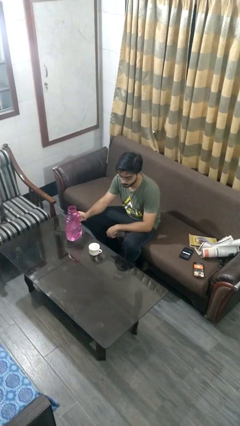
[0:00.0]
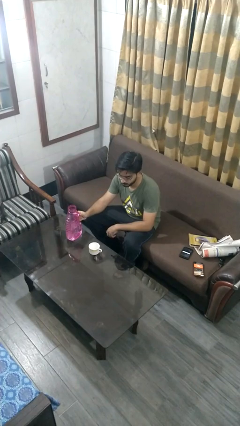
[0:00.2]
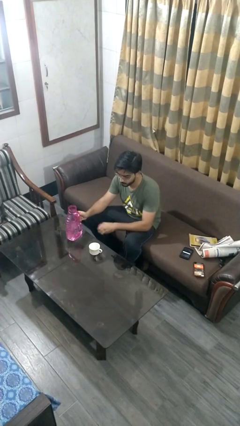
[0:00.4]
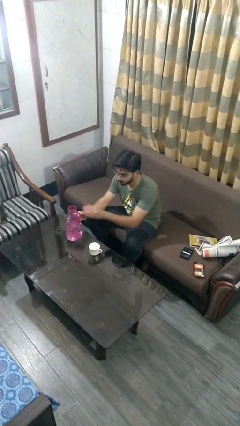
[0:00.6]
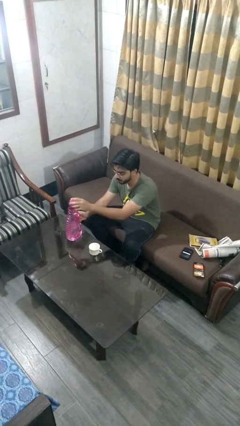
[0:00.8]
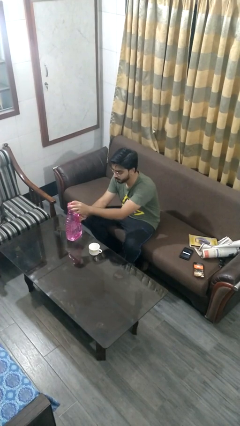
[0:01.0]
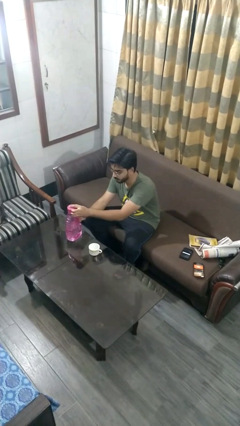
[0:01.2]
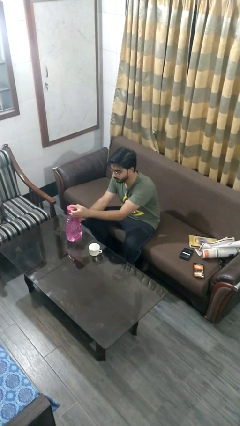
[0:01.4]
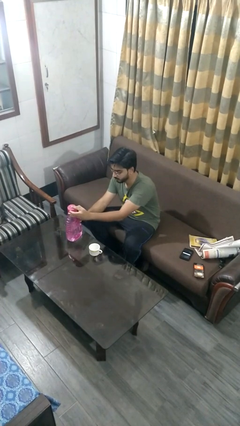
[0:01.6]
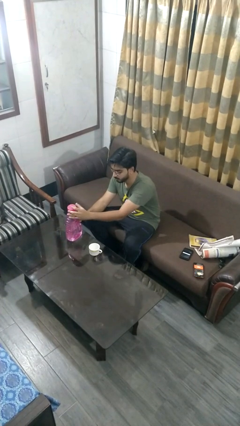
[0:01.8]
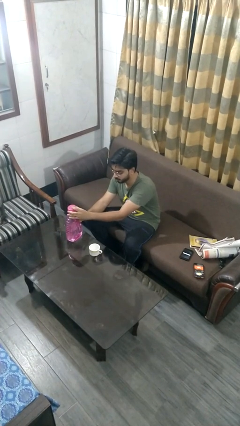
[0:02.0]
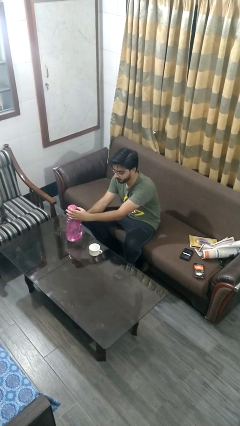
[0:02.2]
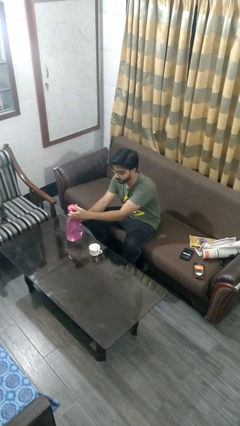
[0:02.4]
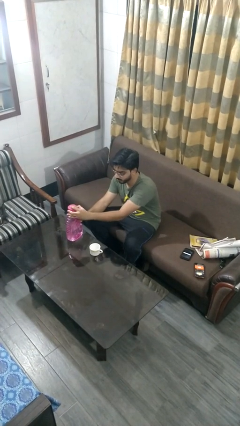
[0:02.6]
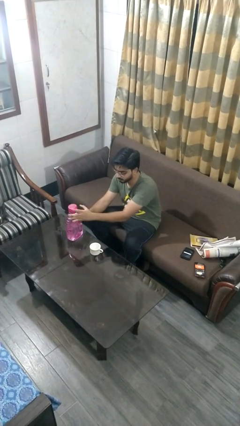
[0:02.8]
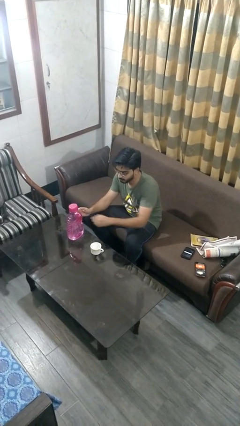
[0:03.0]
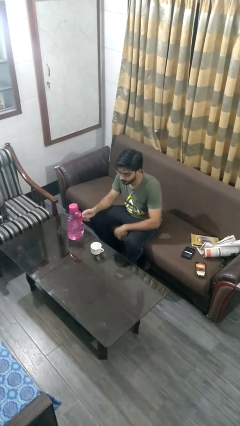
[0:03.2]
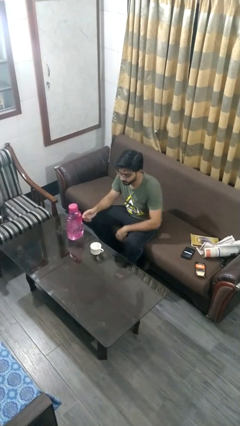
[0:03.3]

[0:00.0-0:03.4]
person screws lid to bottle

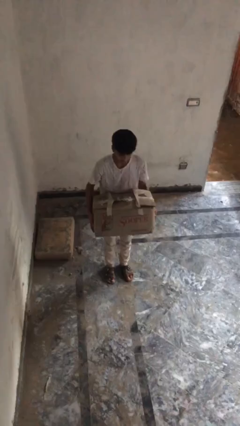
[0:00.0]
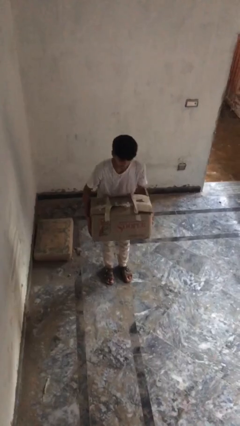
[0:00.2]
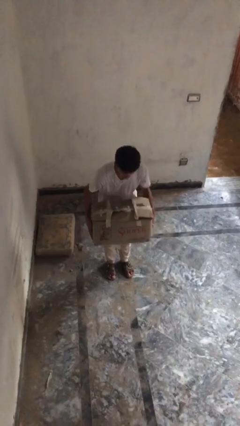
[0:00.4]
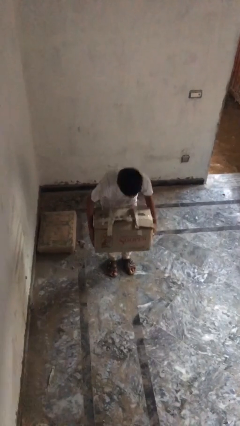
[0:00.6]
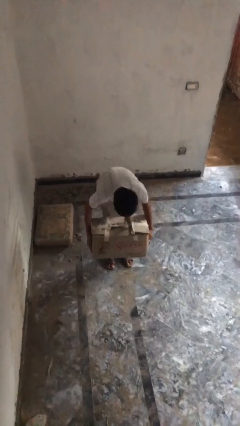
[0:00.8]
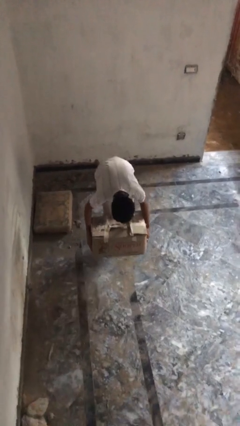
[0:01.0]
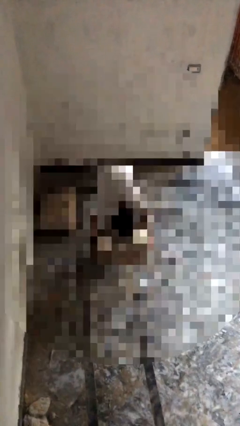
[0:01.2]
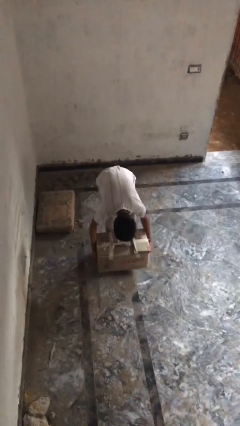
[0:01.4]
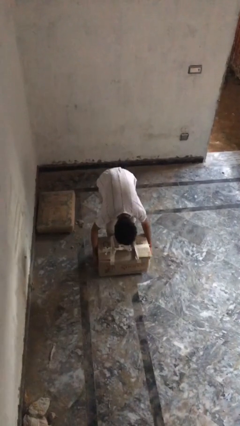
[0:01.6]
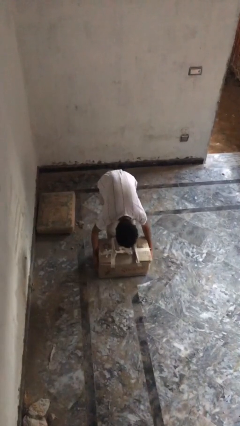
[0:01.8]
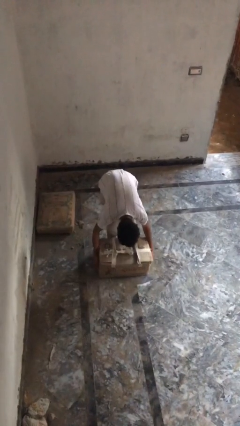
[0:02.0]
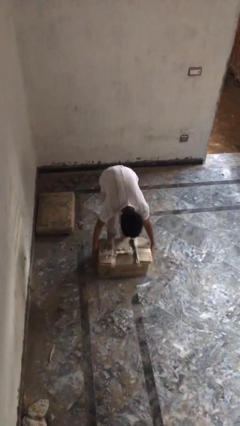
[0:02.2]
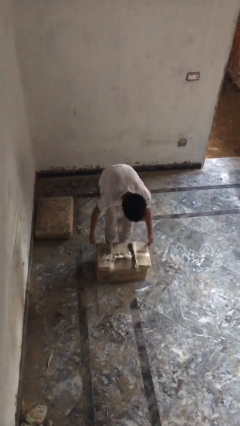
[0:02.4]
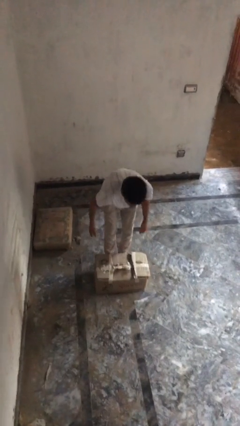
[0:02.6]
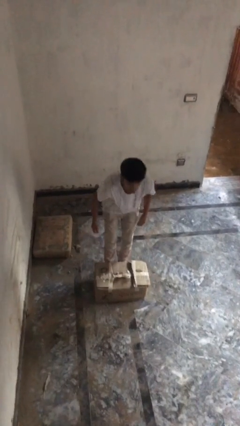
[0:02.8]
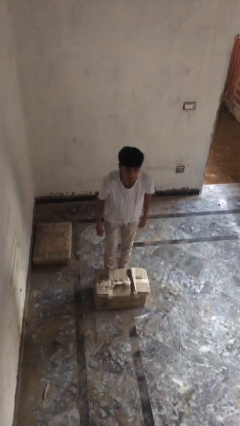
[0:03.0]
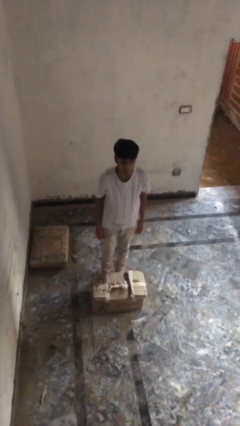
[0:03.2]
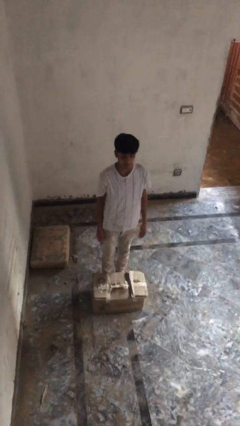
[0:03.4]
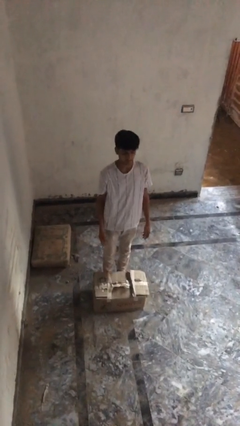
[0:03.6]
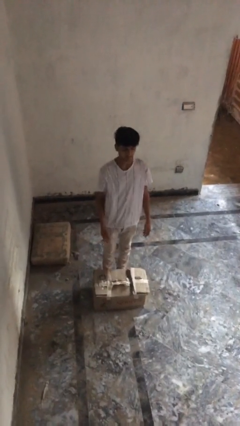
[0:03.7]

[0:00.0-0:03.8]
person puts down object on floor

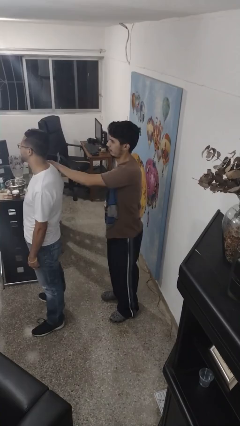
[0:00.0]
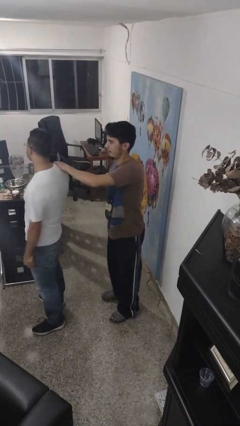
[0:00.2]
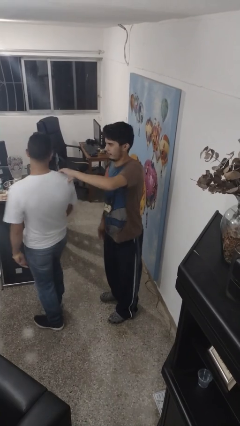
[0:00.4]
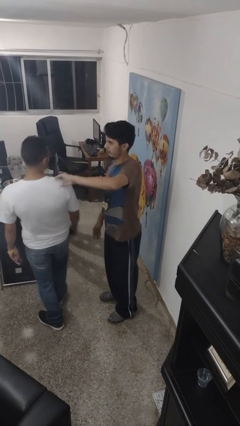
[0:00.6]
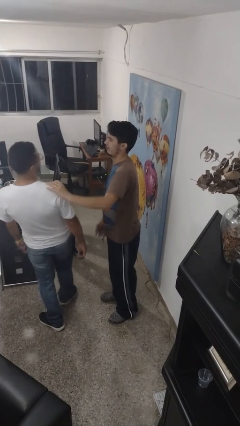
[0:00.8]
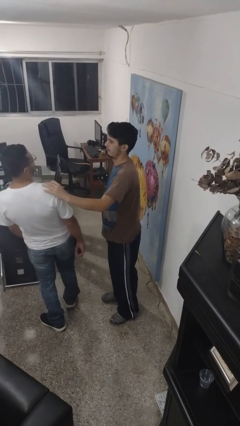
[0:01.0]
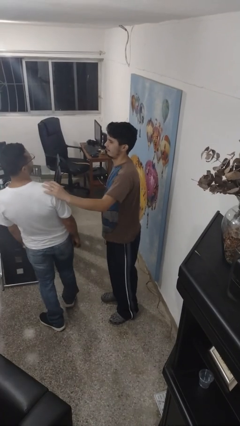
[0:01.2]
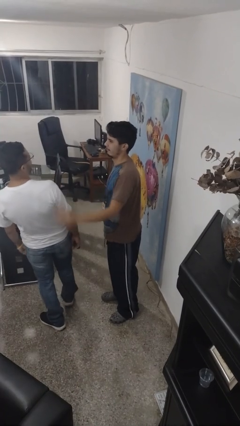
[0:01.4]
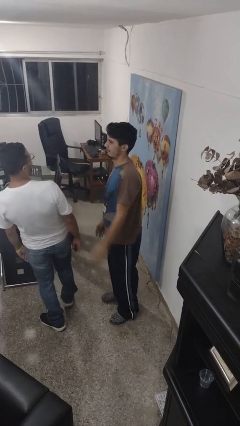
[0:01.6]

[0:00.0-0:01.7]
person spins person around

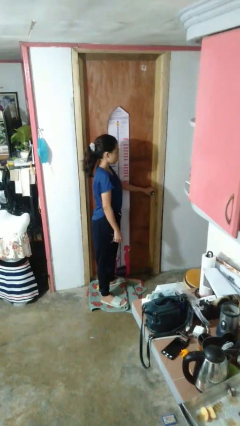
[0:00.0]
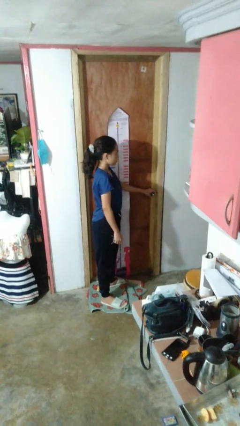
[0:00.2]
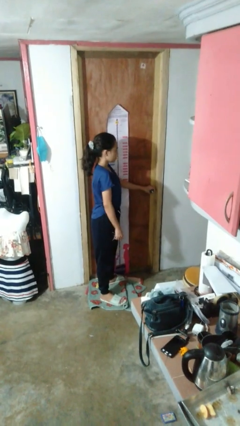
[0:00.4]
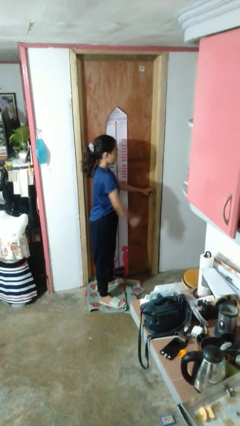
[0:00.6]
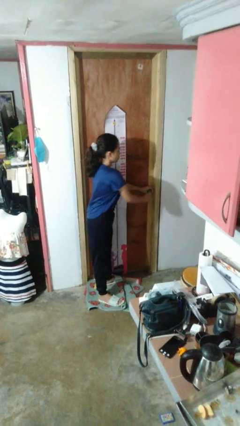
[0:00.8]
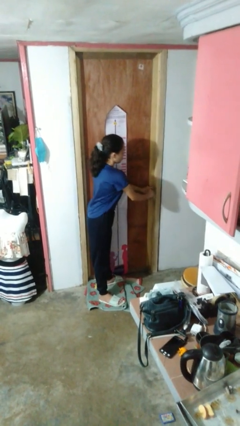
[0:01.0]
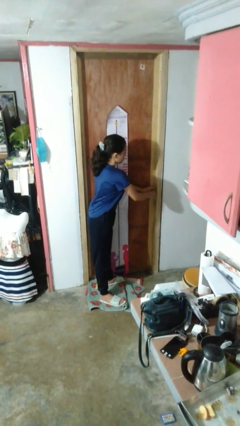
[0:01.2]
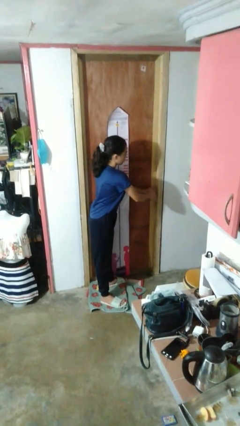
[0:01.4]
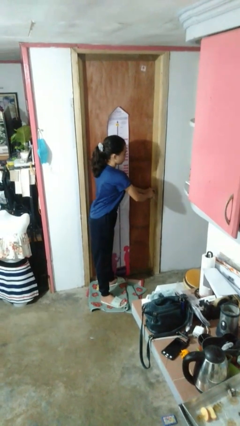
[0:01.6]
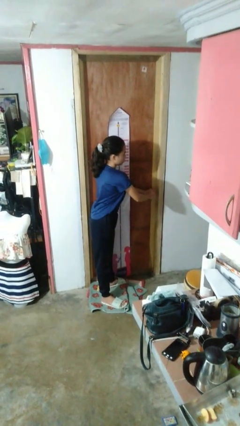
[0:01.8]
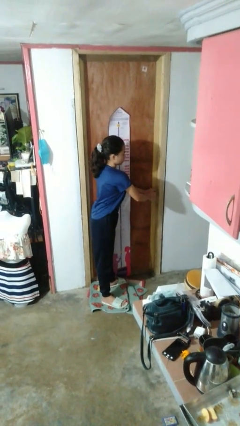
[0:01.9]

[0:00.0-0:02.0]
person locks door with keys

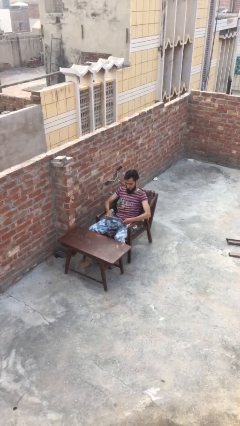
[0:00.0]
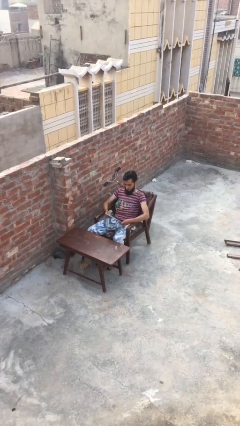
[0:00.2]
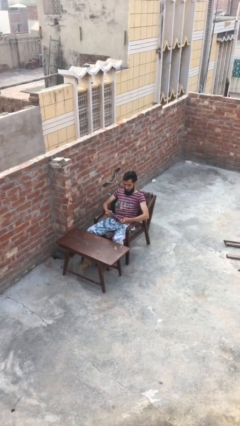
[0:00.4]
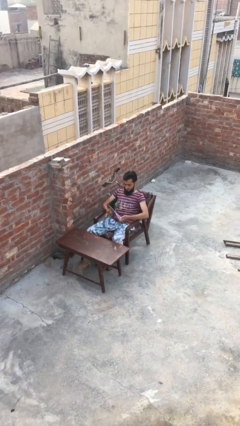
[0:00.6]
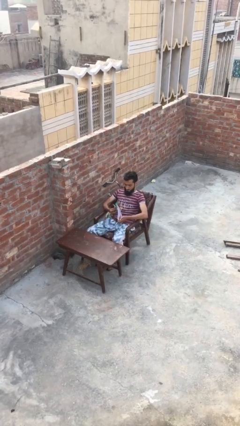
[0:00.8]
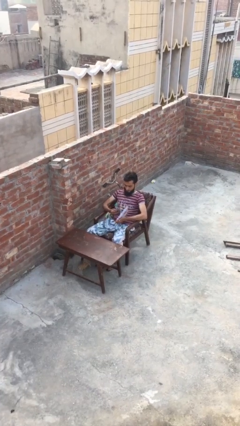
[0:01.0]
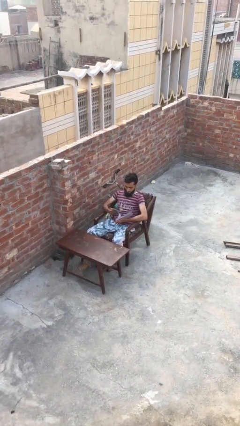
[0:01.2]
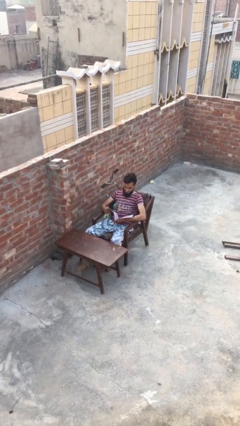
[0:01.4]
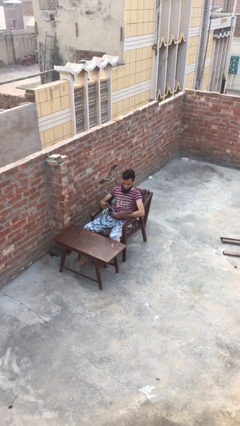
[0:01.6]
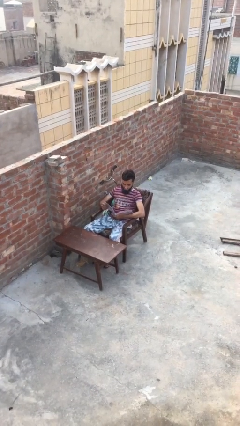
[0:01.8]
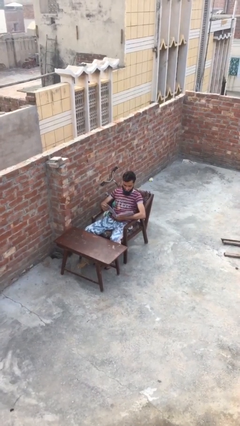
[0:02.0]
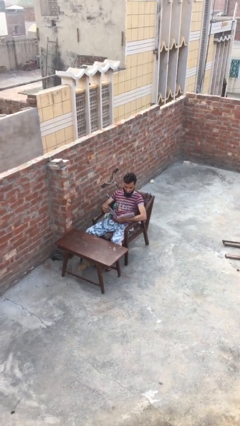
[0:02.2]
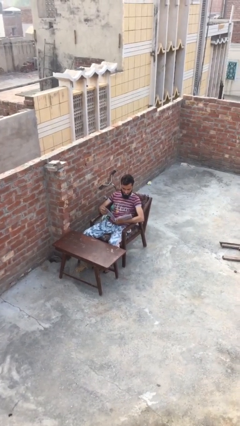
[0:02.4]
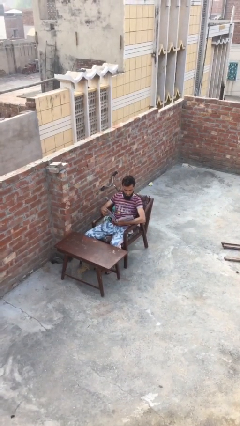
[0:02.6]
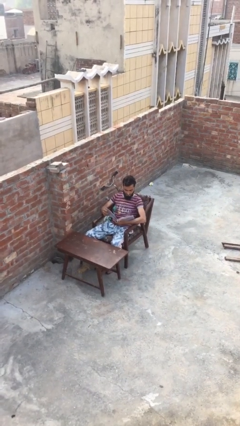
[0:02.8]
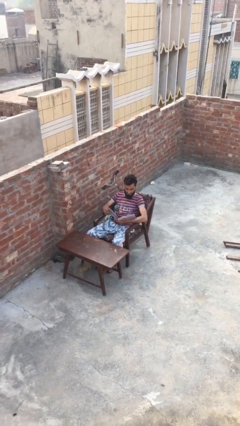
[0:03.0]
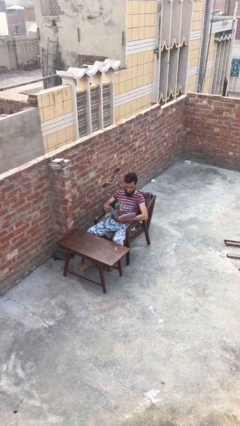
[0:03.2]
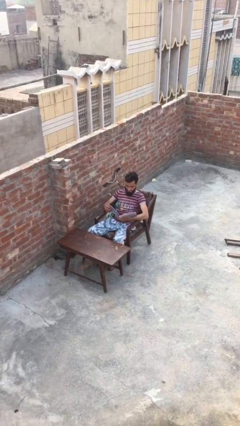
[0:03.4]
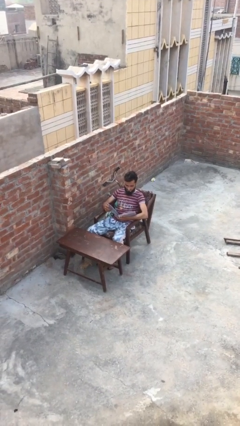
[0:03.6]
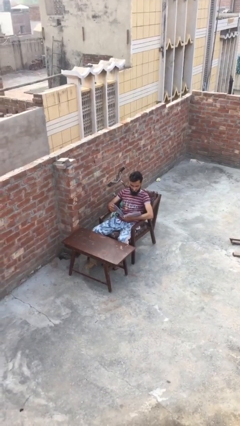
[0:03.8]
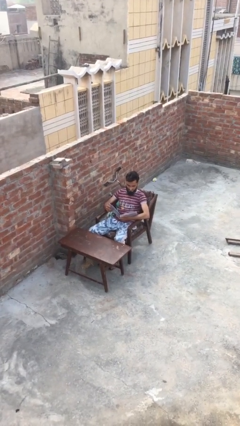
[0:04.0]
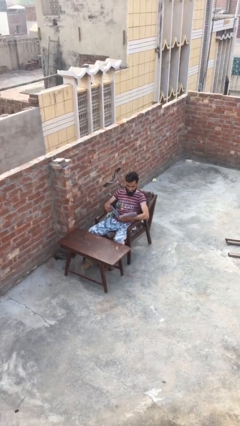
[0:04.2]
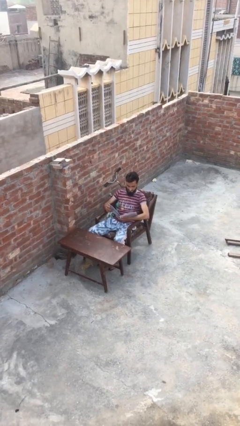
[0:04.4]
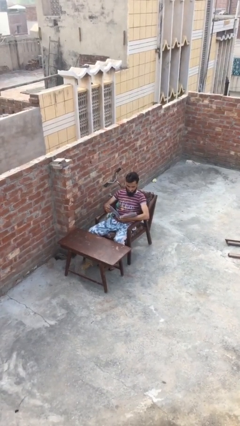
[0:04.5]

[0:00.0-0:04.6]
person reads document

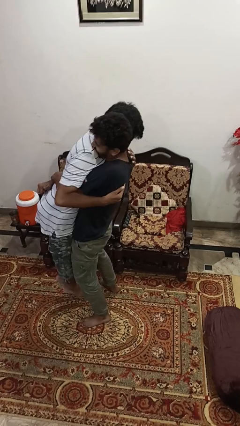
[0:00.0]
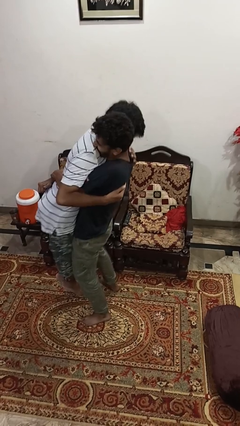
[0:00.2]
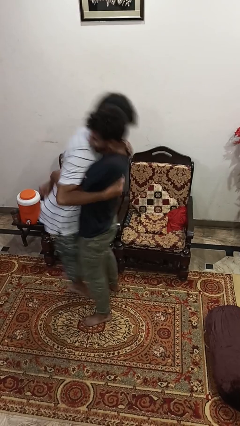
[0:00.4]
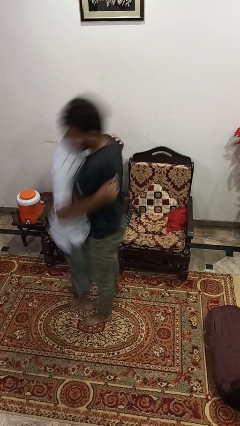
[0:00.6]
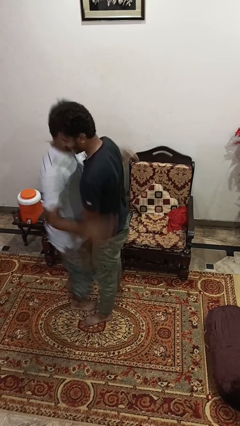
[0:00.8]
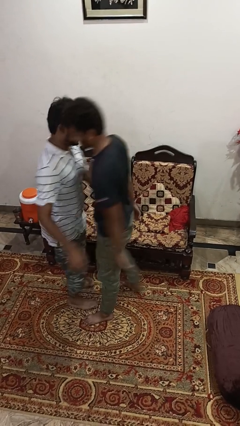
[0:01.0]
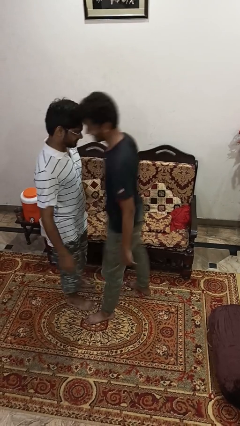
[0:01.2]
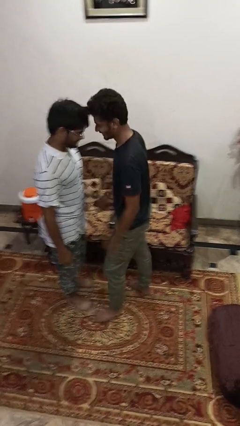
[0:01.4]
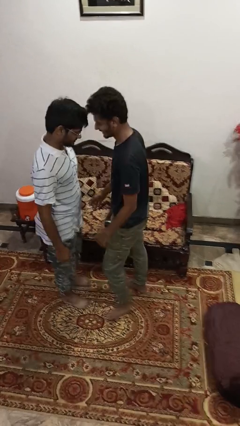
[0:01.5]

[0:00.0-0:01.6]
person puts down person
